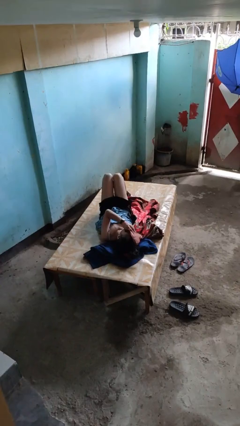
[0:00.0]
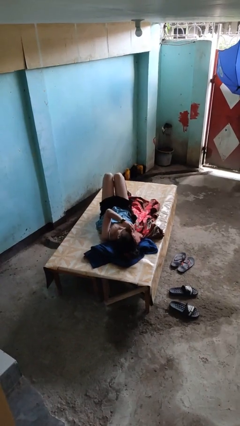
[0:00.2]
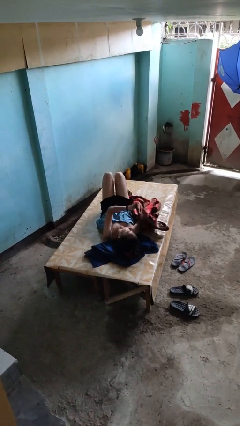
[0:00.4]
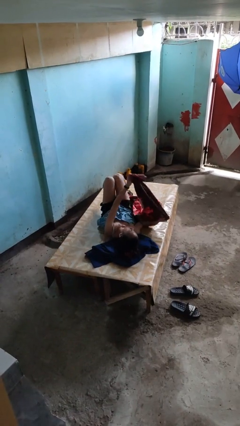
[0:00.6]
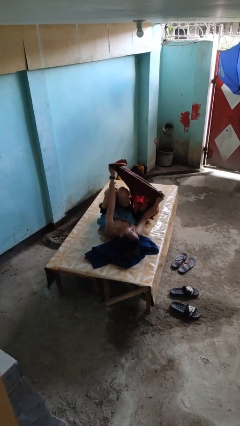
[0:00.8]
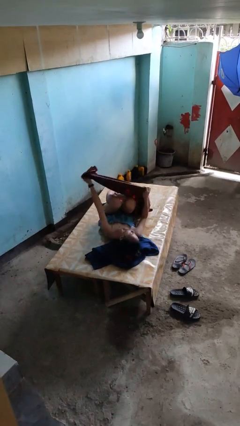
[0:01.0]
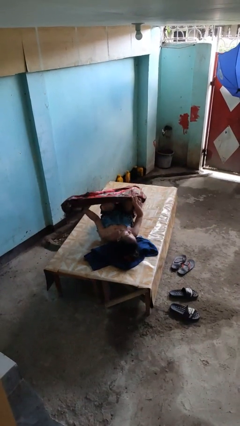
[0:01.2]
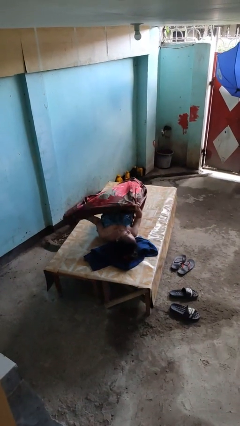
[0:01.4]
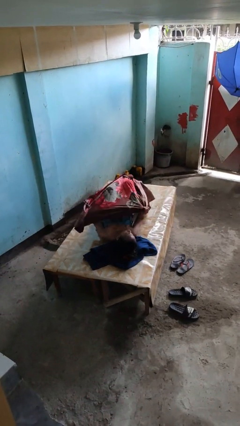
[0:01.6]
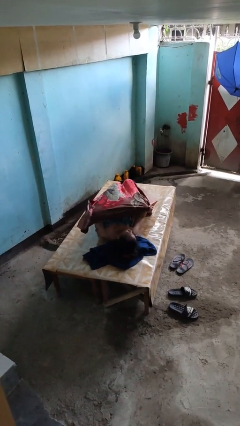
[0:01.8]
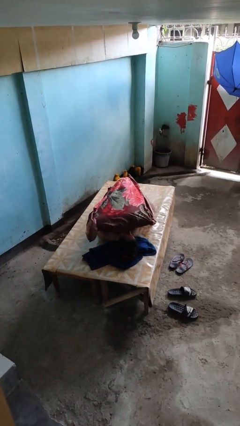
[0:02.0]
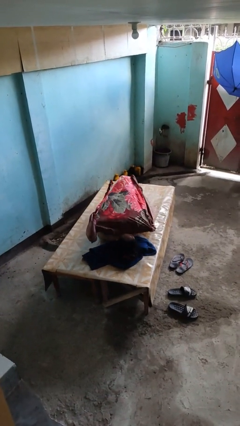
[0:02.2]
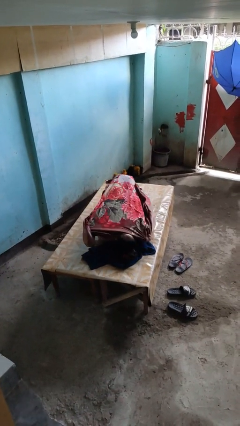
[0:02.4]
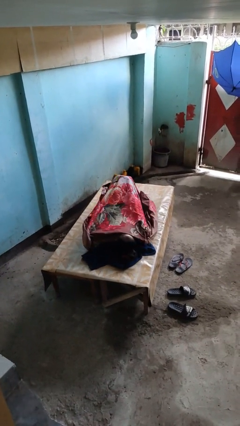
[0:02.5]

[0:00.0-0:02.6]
person covers with blanket

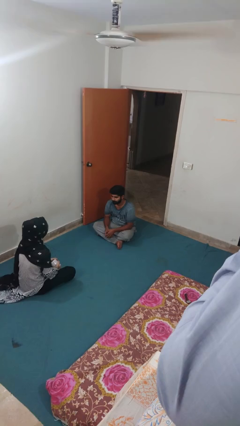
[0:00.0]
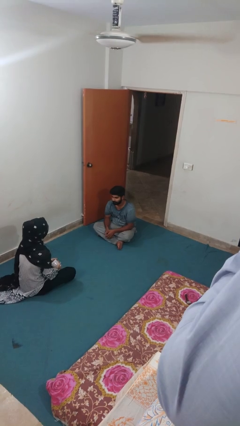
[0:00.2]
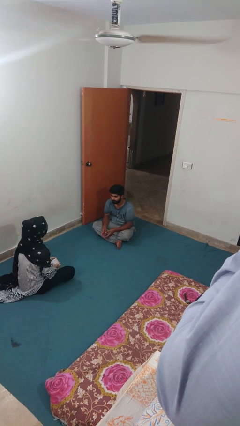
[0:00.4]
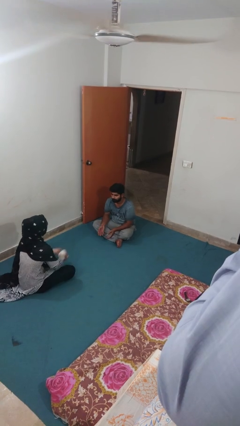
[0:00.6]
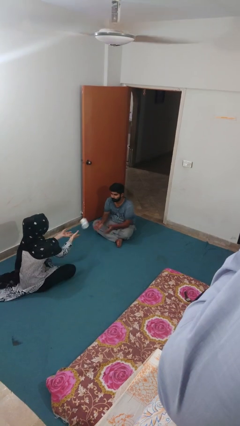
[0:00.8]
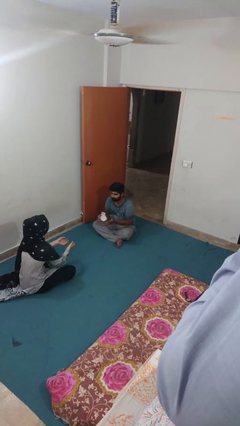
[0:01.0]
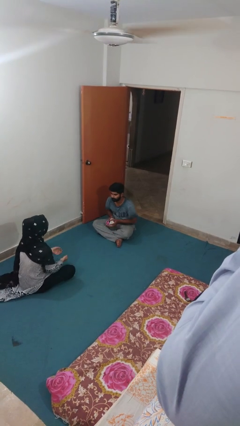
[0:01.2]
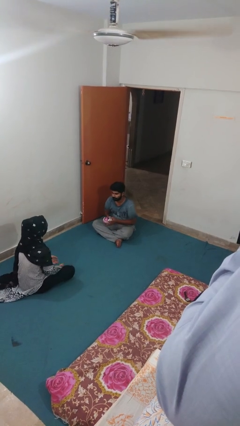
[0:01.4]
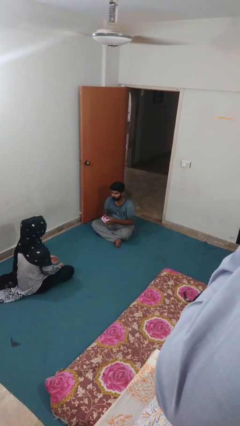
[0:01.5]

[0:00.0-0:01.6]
person catches object from person

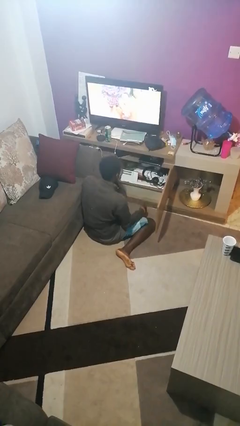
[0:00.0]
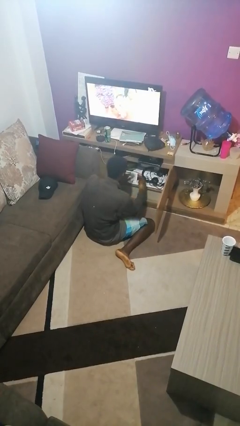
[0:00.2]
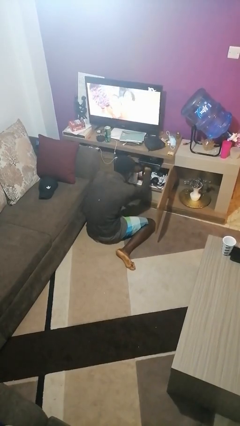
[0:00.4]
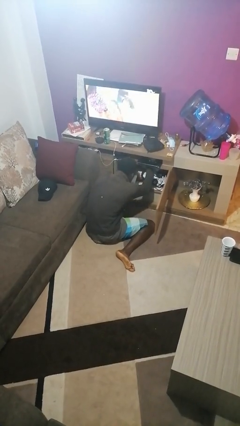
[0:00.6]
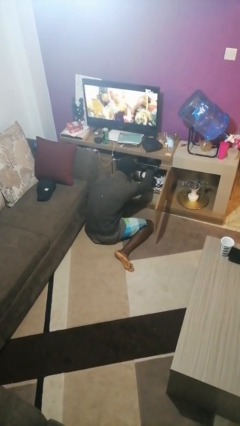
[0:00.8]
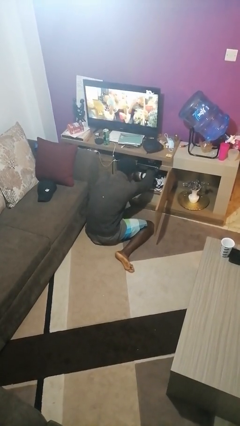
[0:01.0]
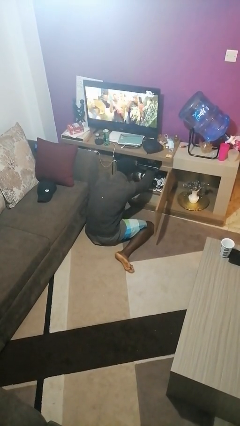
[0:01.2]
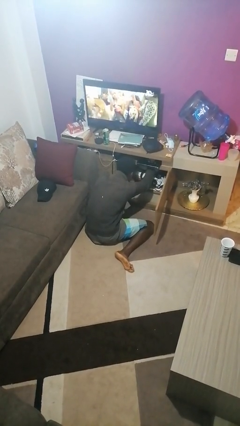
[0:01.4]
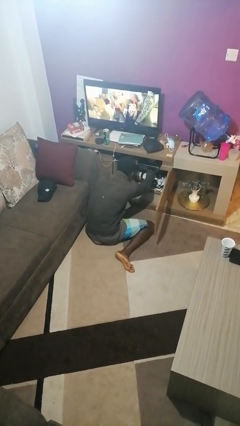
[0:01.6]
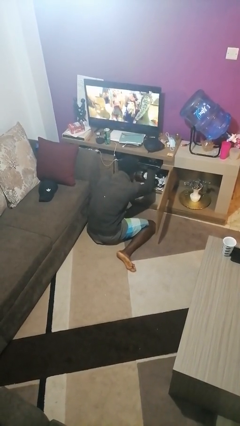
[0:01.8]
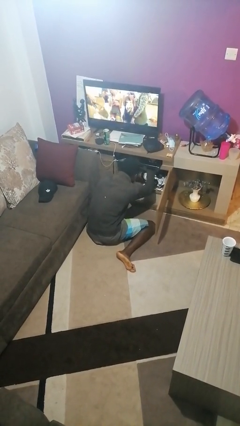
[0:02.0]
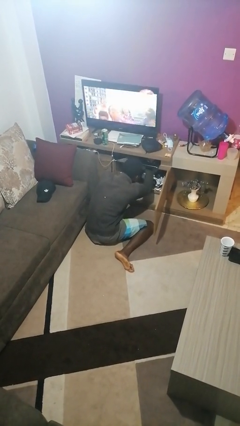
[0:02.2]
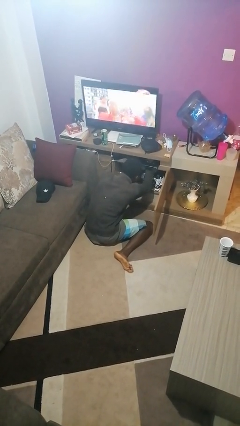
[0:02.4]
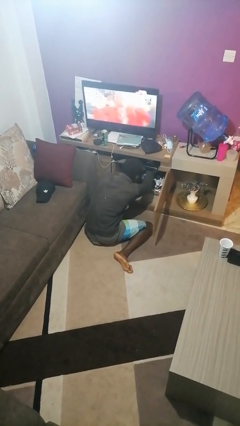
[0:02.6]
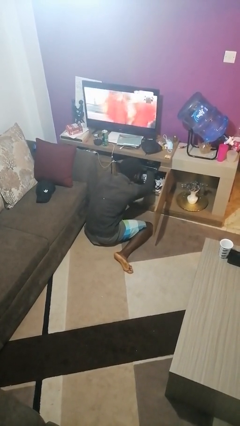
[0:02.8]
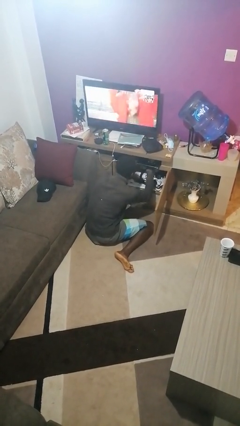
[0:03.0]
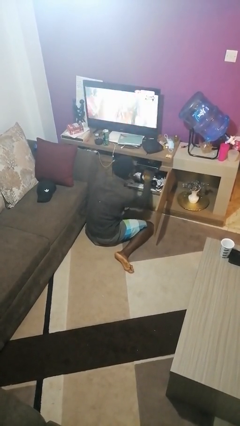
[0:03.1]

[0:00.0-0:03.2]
person searches in cabinet

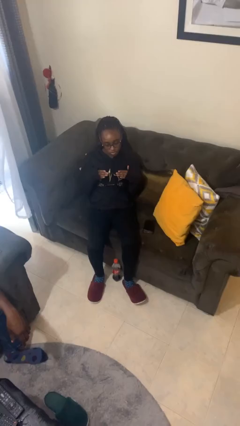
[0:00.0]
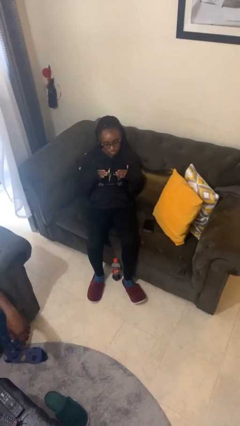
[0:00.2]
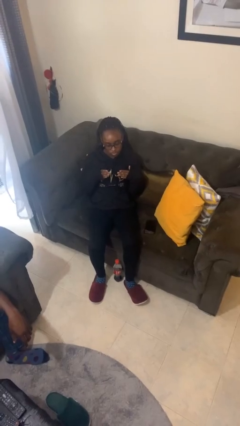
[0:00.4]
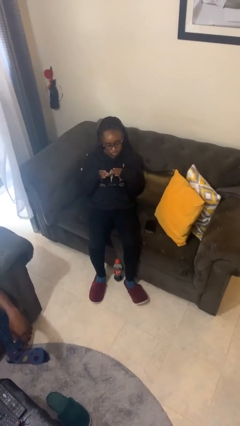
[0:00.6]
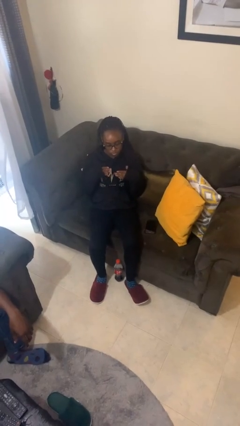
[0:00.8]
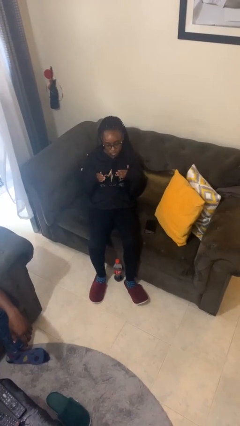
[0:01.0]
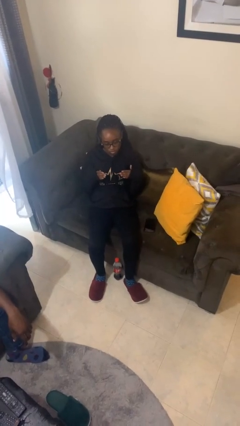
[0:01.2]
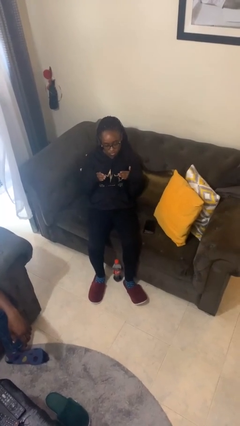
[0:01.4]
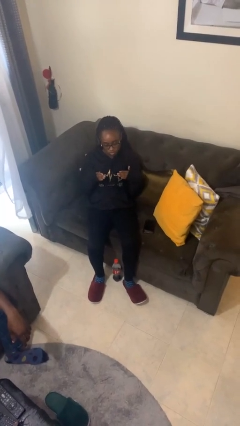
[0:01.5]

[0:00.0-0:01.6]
person drums on chest

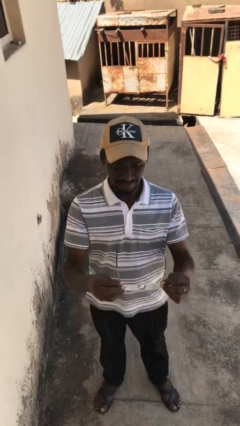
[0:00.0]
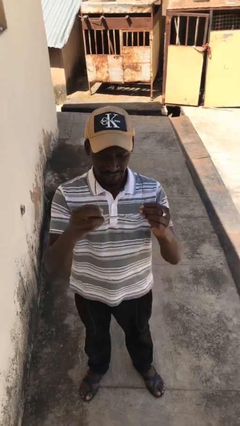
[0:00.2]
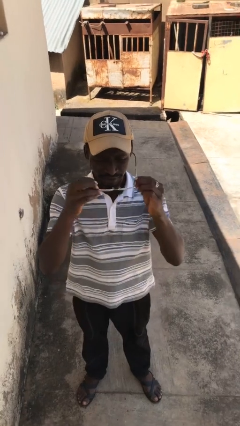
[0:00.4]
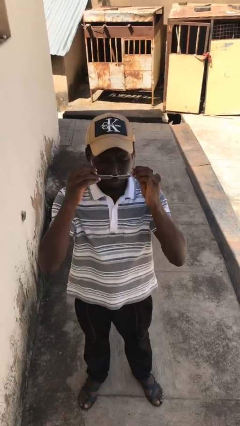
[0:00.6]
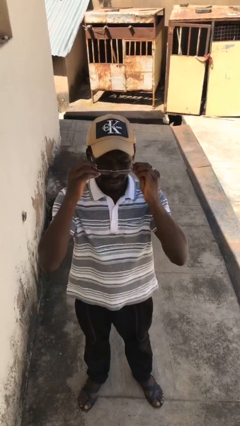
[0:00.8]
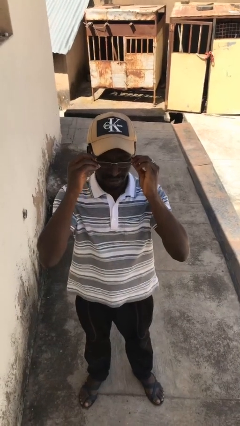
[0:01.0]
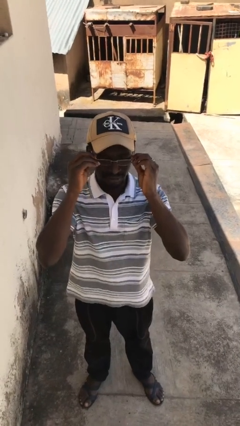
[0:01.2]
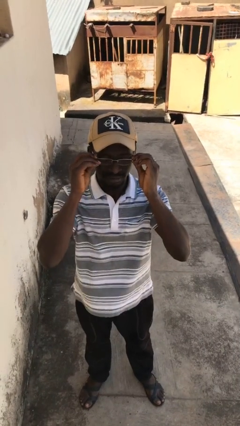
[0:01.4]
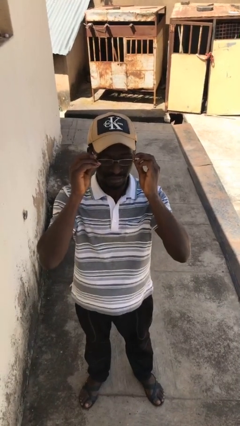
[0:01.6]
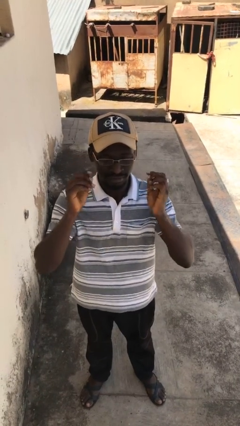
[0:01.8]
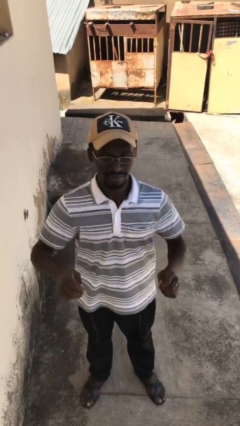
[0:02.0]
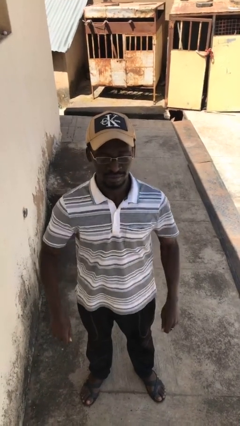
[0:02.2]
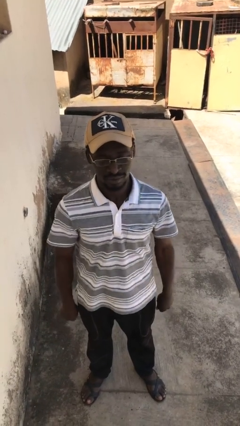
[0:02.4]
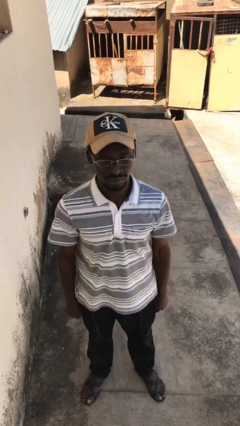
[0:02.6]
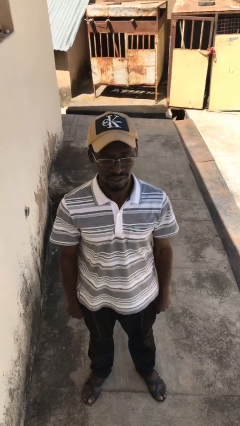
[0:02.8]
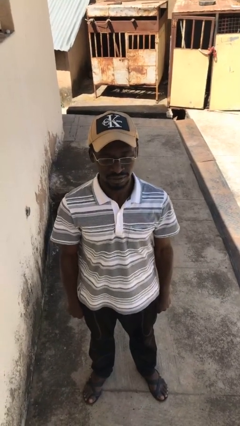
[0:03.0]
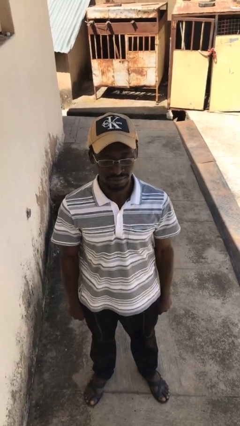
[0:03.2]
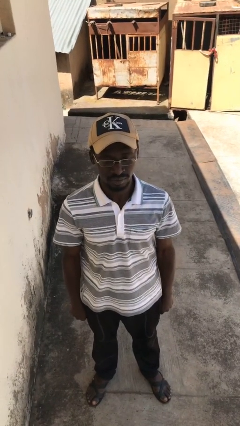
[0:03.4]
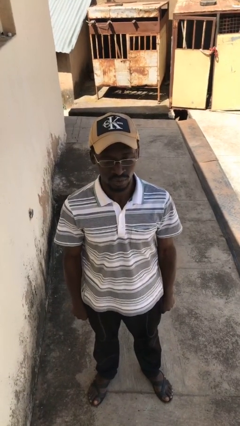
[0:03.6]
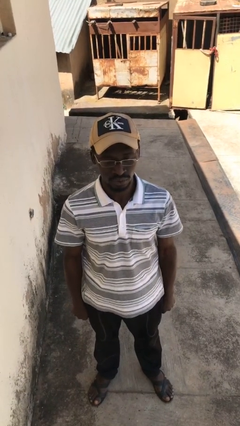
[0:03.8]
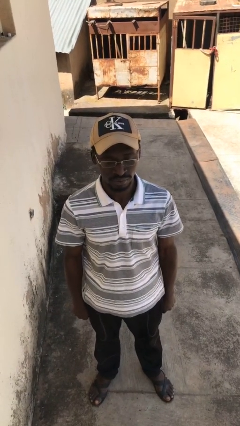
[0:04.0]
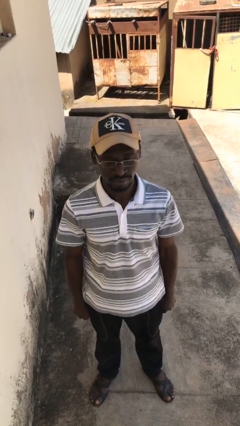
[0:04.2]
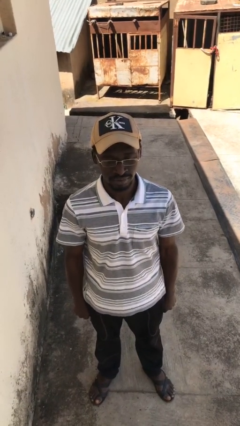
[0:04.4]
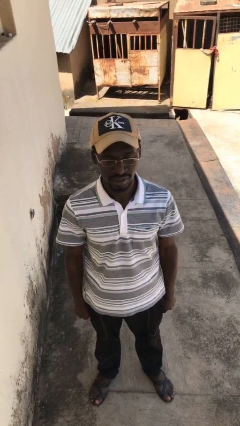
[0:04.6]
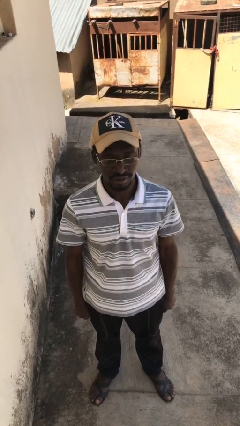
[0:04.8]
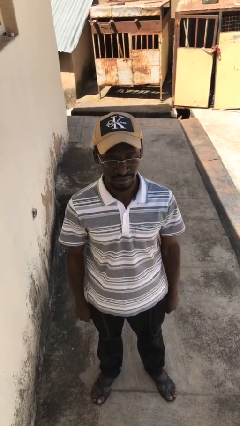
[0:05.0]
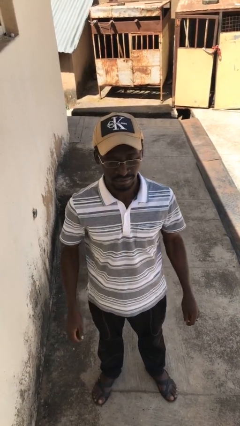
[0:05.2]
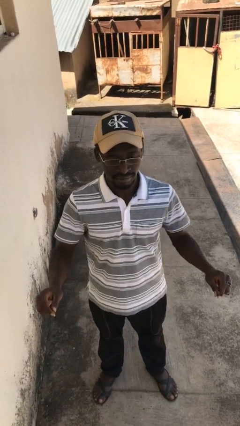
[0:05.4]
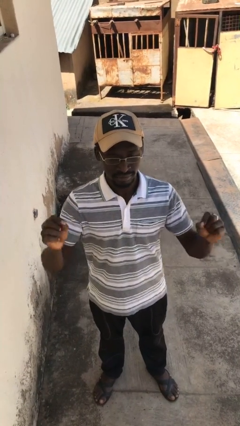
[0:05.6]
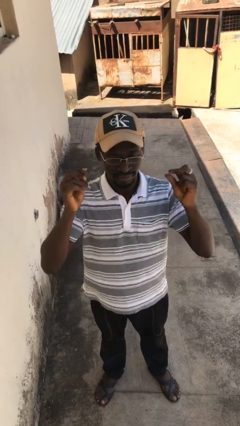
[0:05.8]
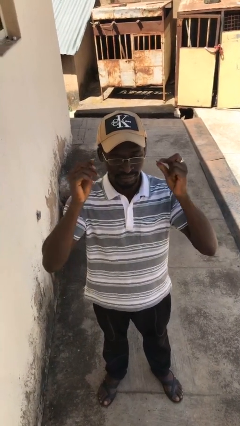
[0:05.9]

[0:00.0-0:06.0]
person puts on glasses

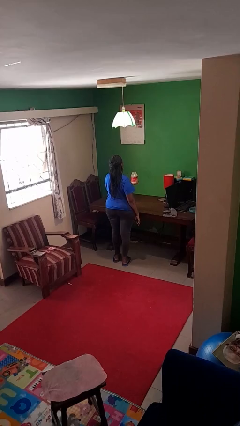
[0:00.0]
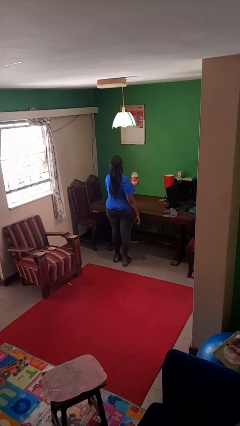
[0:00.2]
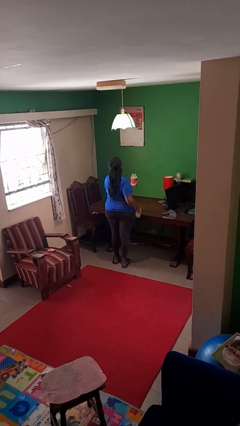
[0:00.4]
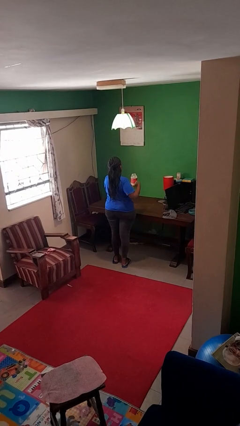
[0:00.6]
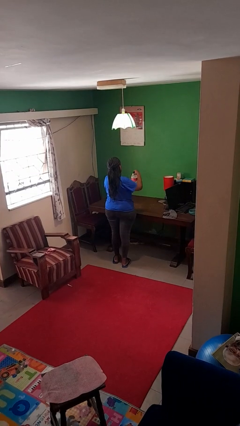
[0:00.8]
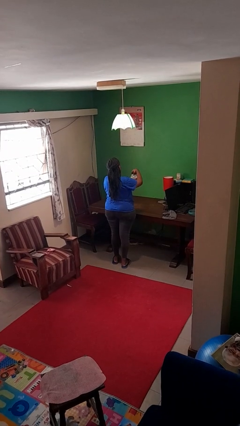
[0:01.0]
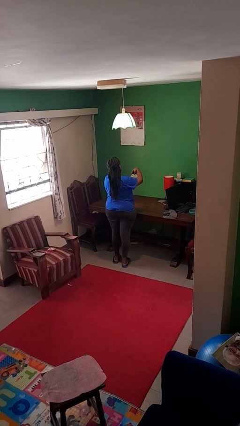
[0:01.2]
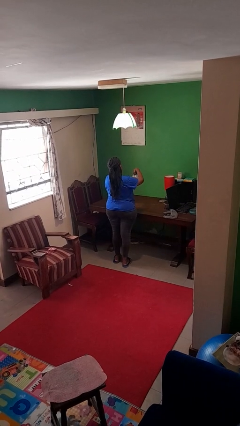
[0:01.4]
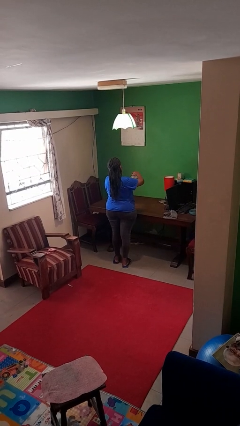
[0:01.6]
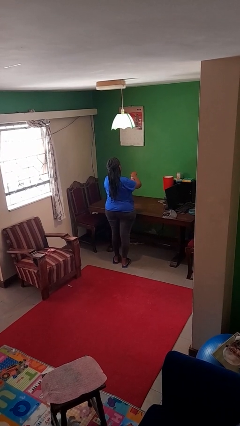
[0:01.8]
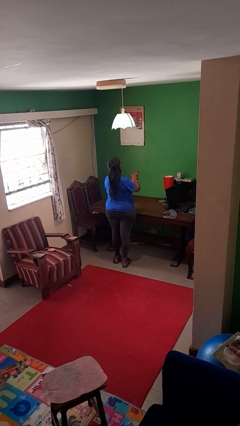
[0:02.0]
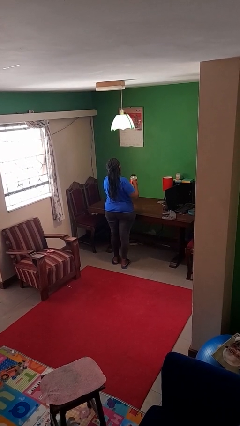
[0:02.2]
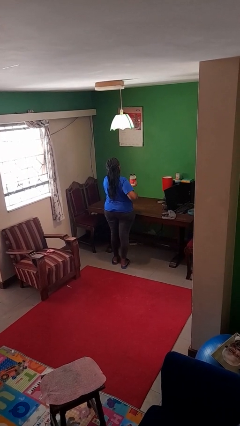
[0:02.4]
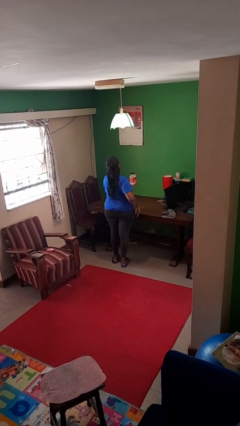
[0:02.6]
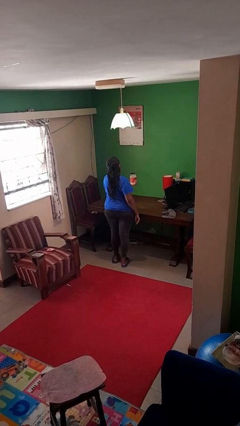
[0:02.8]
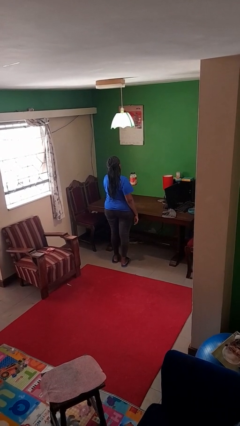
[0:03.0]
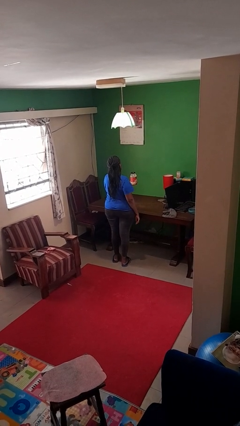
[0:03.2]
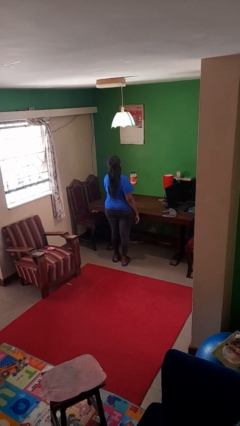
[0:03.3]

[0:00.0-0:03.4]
person closes jar
